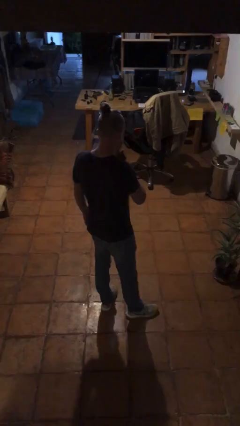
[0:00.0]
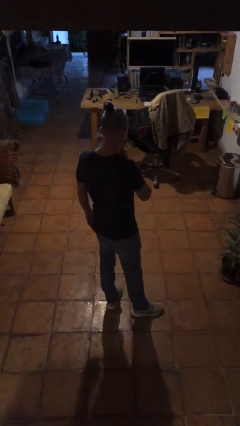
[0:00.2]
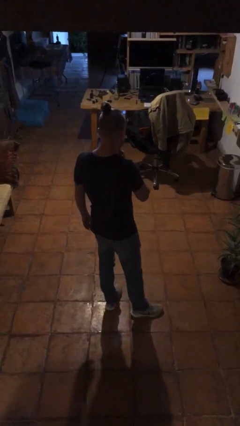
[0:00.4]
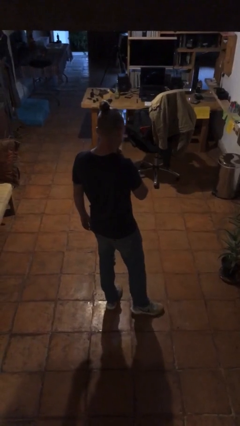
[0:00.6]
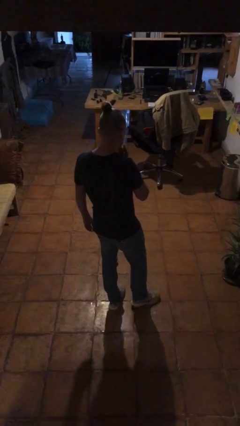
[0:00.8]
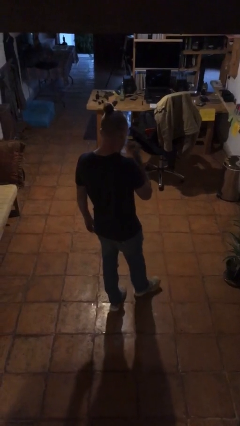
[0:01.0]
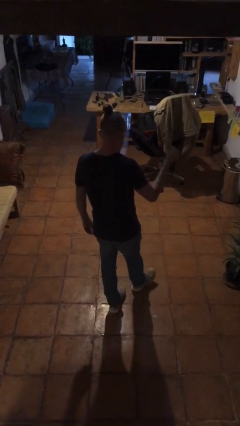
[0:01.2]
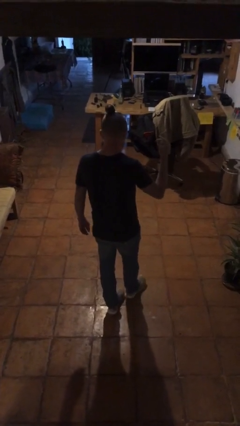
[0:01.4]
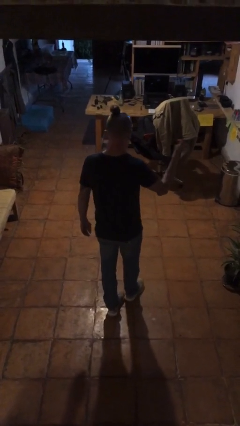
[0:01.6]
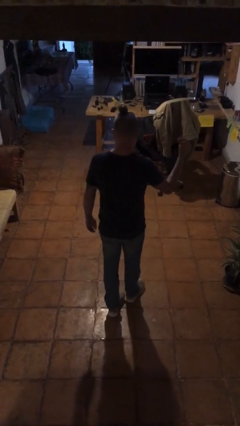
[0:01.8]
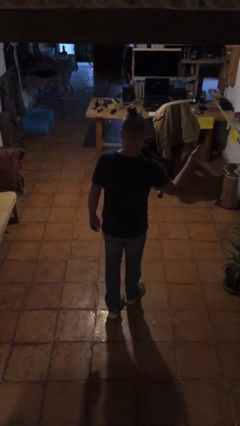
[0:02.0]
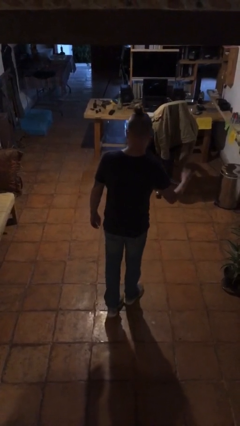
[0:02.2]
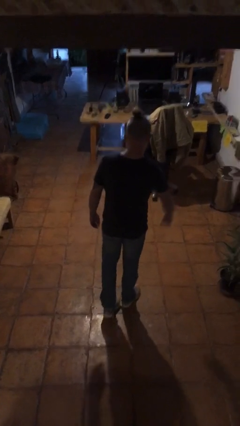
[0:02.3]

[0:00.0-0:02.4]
person snaps fingers

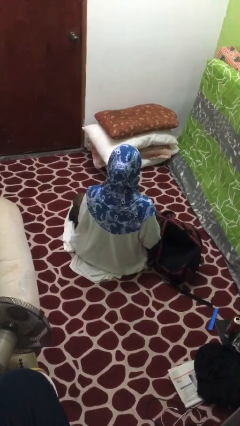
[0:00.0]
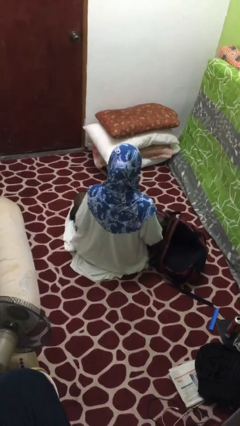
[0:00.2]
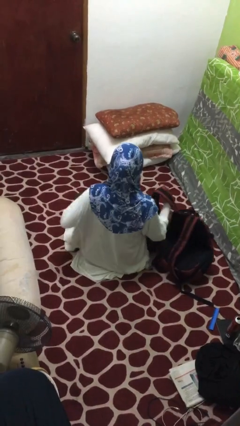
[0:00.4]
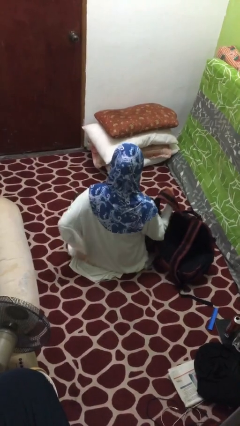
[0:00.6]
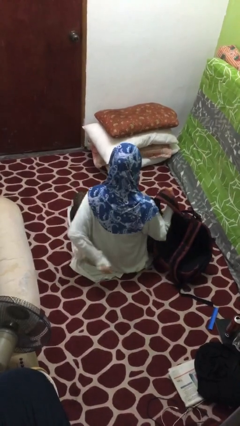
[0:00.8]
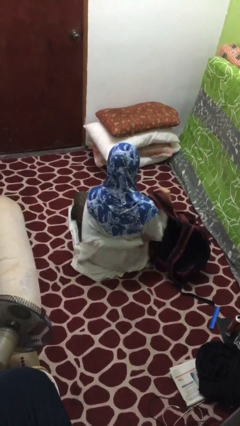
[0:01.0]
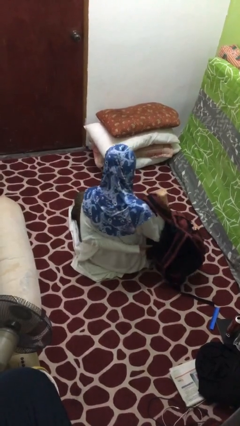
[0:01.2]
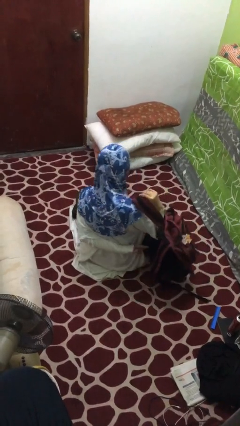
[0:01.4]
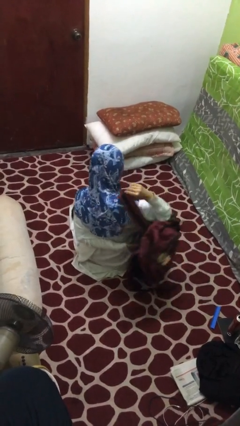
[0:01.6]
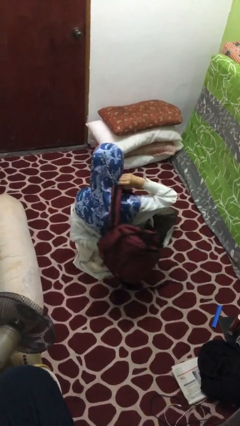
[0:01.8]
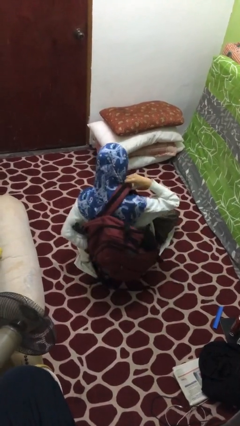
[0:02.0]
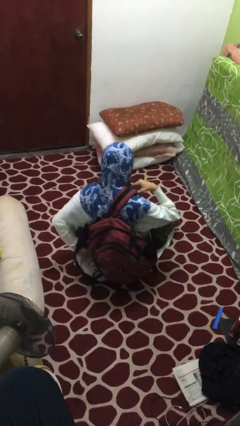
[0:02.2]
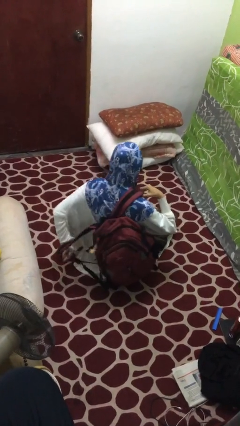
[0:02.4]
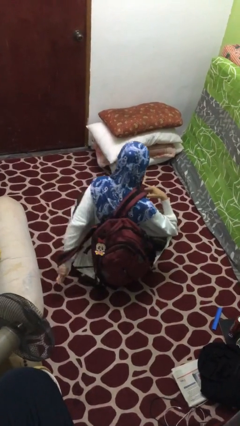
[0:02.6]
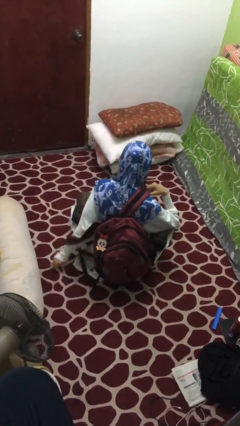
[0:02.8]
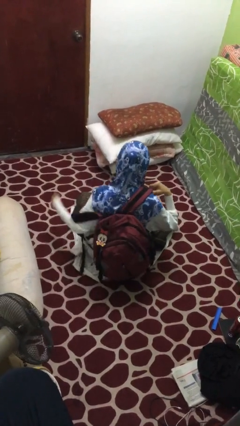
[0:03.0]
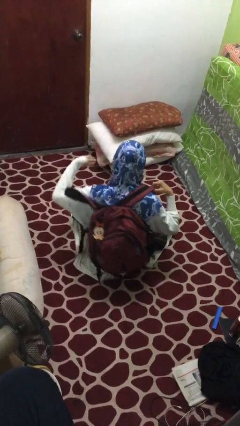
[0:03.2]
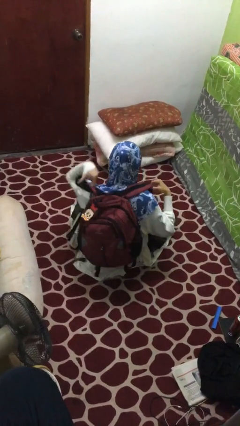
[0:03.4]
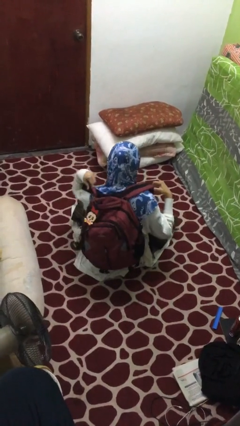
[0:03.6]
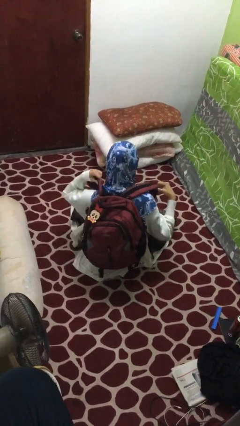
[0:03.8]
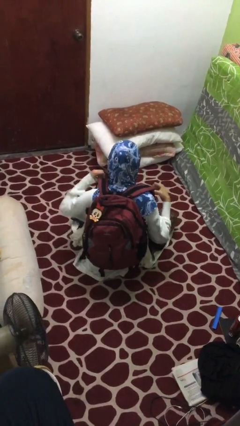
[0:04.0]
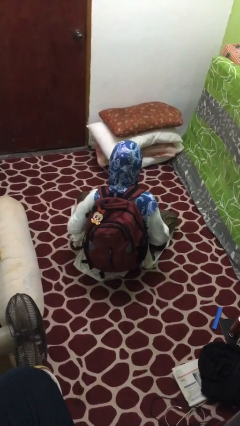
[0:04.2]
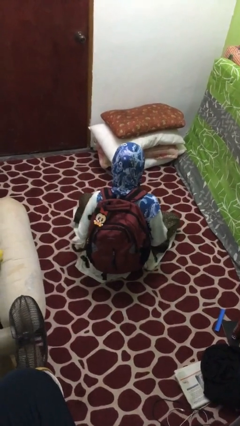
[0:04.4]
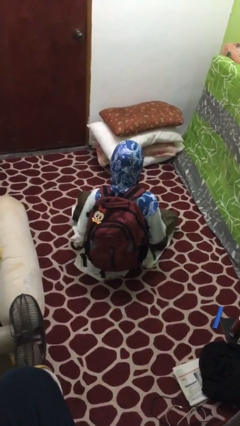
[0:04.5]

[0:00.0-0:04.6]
person puts on backpack

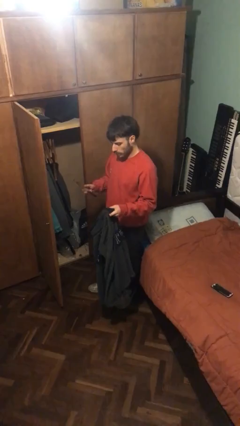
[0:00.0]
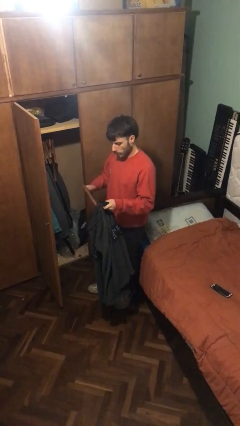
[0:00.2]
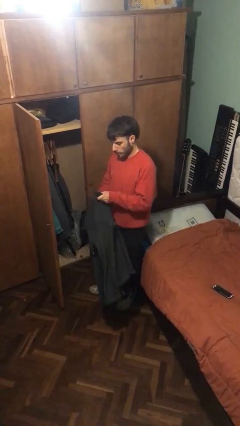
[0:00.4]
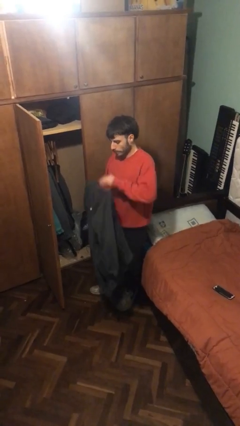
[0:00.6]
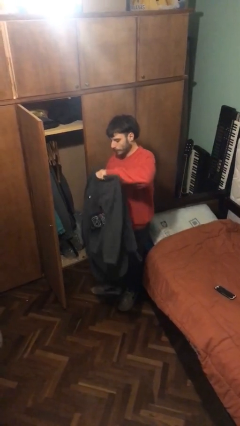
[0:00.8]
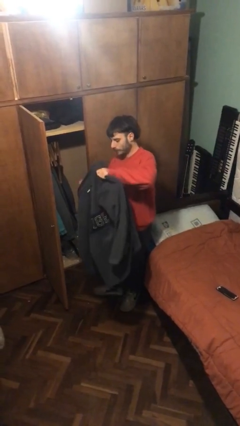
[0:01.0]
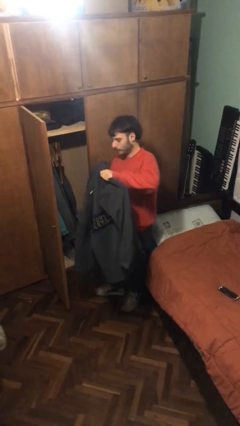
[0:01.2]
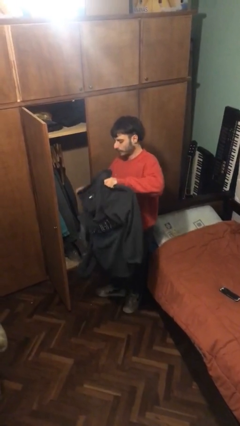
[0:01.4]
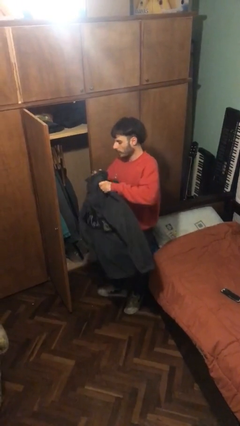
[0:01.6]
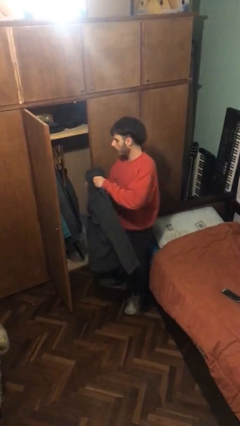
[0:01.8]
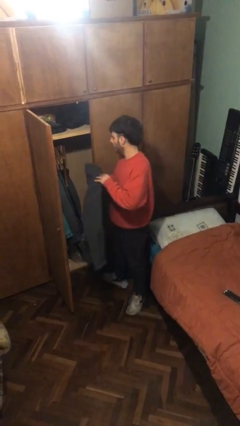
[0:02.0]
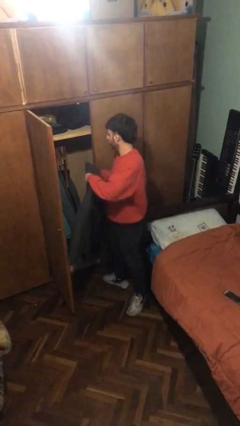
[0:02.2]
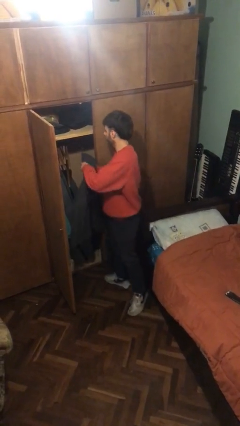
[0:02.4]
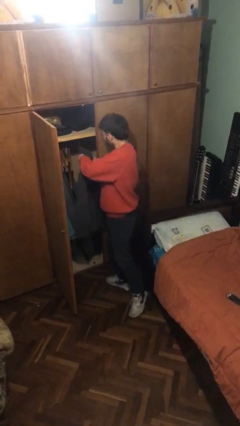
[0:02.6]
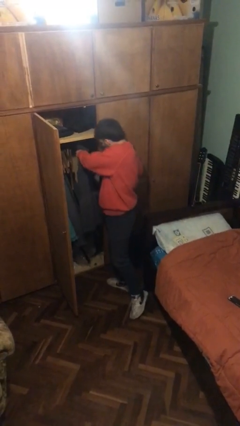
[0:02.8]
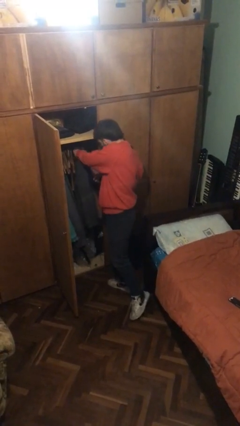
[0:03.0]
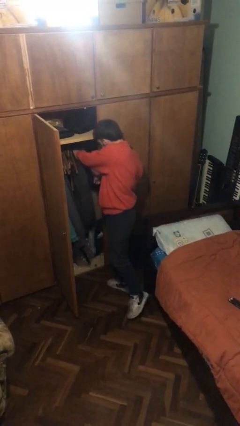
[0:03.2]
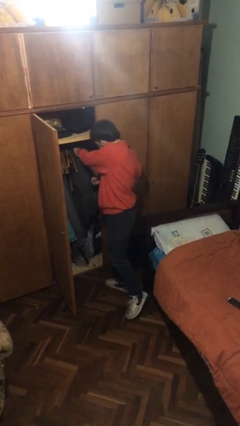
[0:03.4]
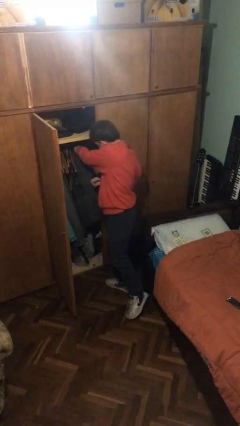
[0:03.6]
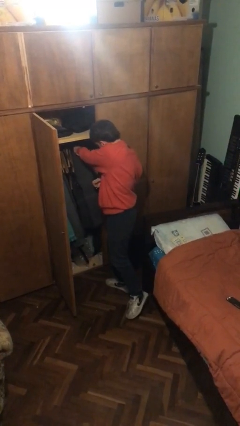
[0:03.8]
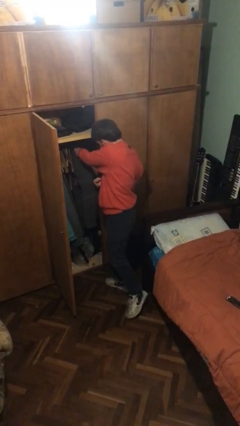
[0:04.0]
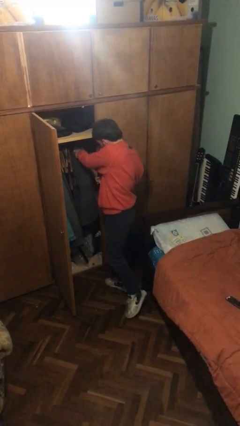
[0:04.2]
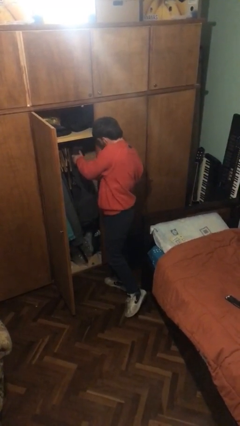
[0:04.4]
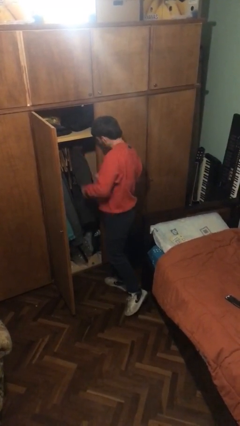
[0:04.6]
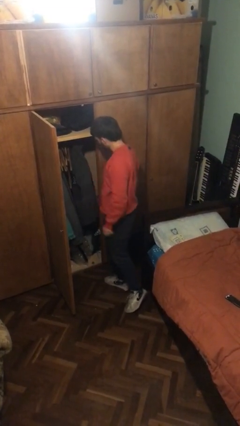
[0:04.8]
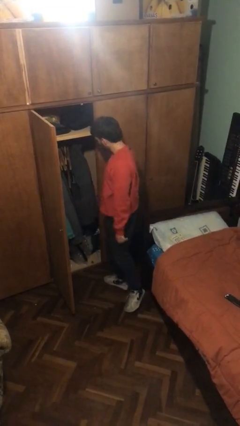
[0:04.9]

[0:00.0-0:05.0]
person puts clothes into closet

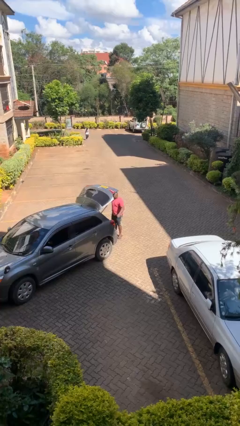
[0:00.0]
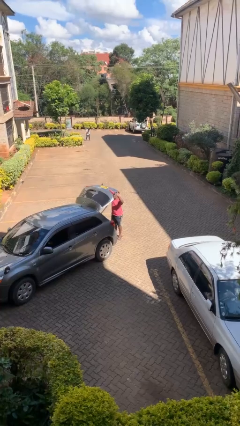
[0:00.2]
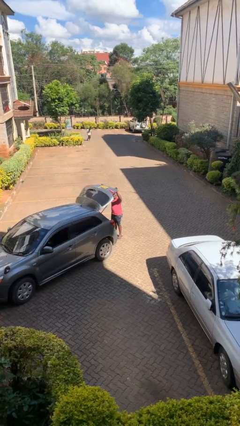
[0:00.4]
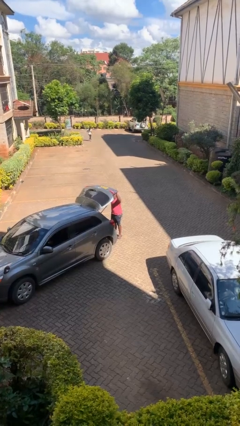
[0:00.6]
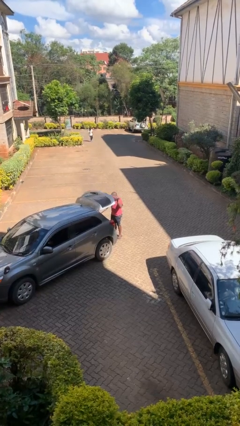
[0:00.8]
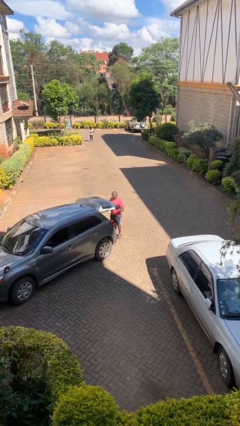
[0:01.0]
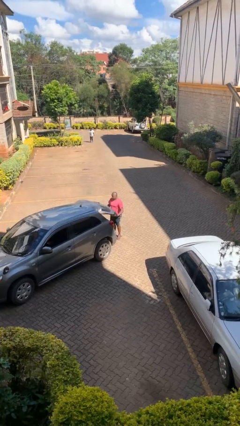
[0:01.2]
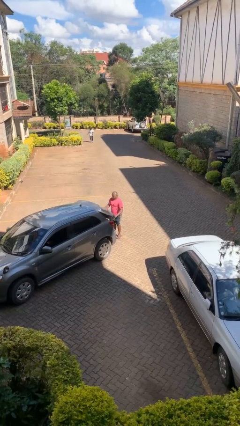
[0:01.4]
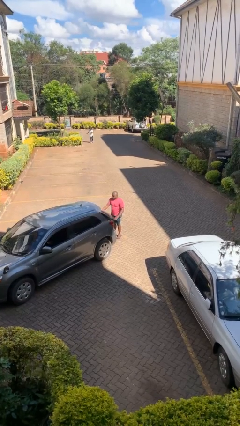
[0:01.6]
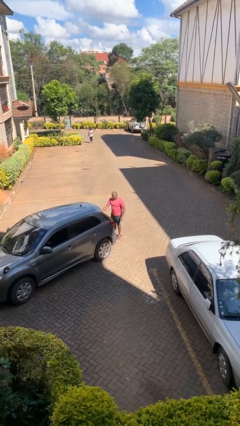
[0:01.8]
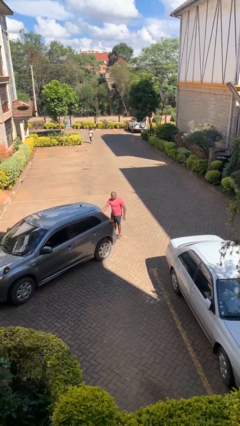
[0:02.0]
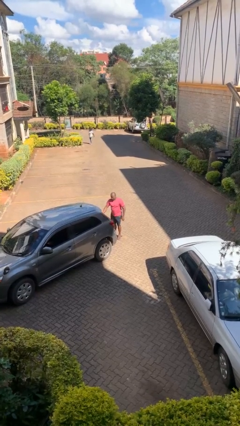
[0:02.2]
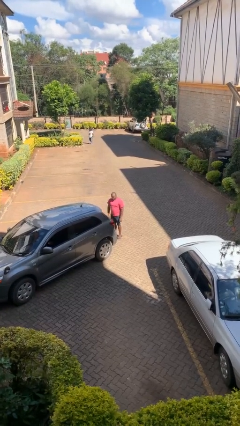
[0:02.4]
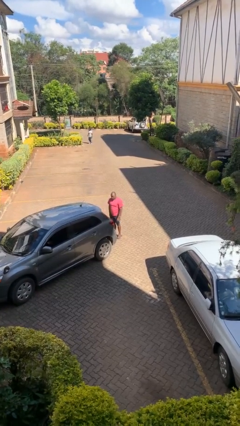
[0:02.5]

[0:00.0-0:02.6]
person closes car trunk

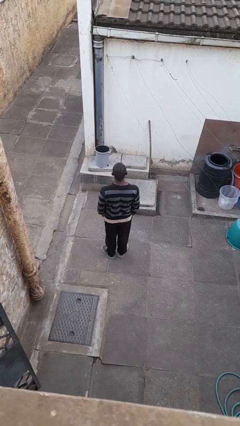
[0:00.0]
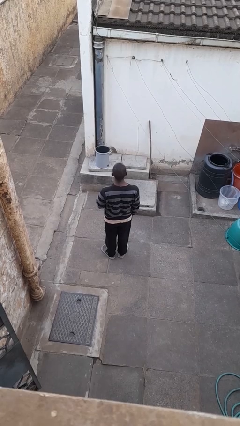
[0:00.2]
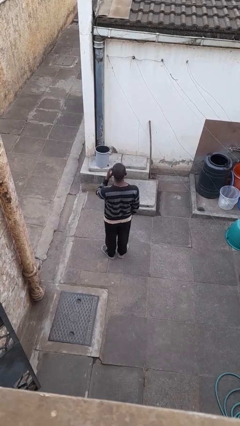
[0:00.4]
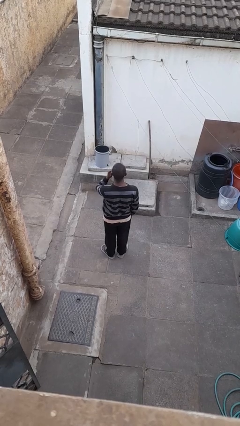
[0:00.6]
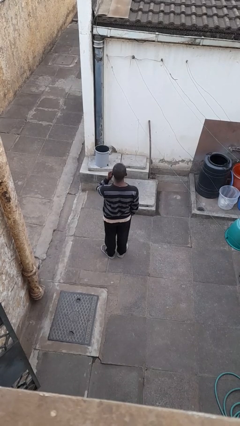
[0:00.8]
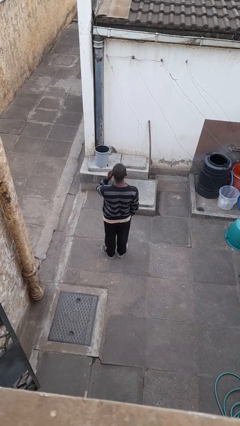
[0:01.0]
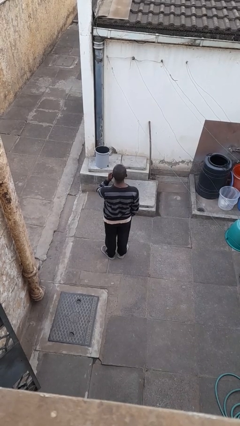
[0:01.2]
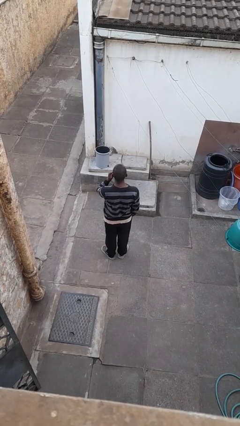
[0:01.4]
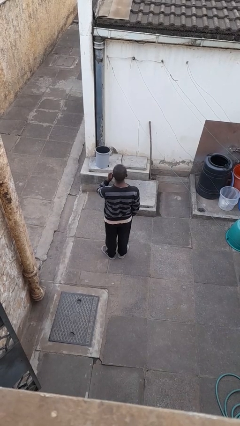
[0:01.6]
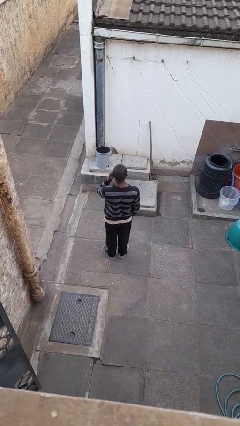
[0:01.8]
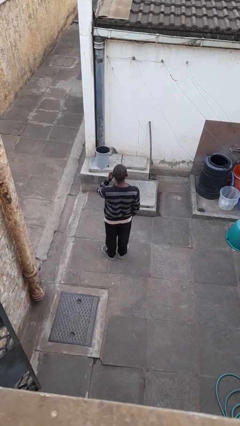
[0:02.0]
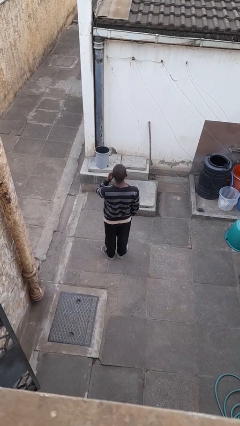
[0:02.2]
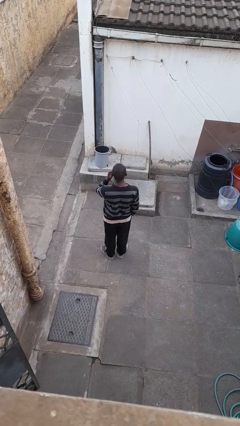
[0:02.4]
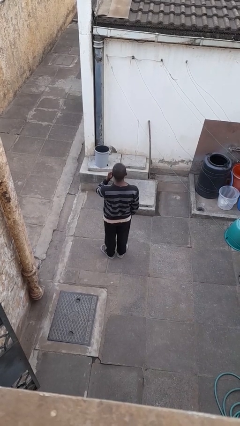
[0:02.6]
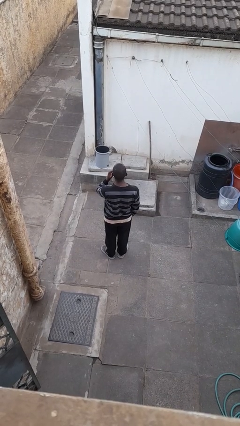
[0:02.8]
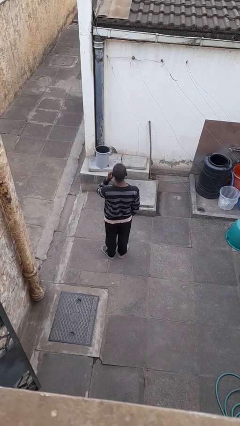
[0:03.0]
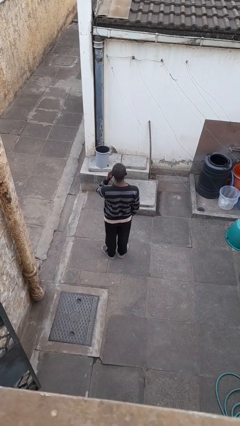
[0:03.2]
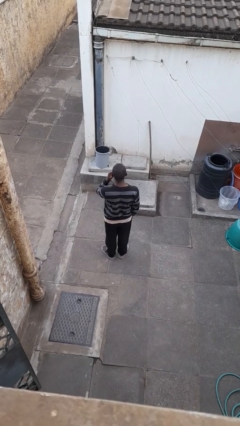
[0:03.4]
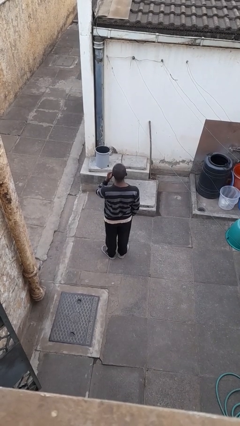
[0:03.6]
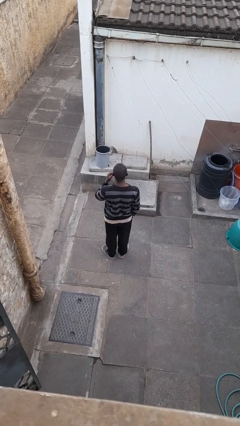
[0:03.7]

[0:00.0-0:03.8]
person scratches face
